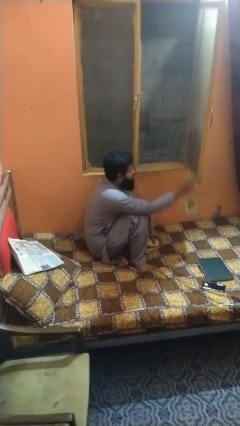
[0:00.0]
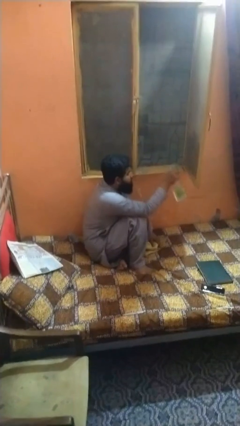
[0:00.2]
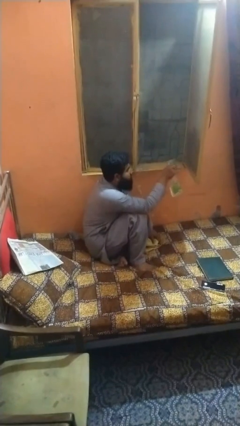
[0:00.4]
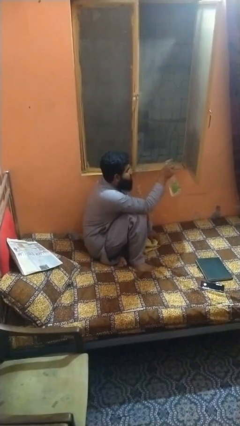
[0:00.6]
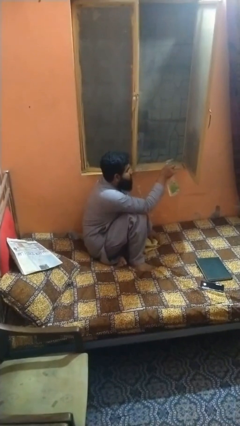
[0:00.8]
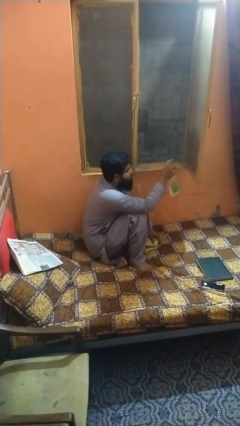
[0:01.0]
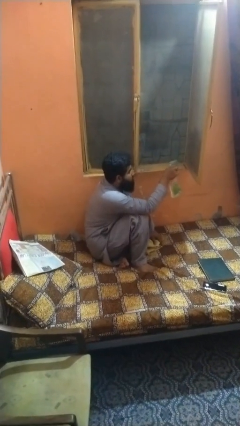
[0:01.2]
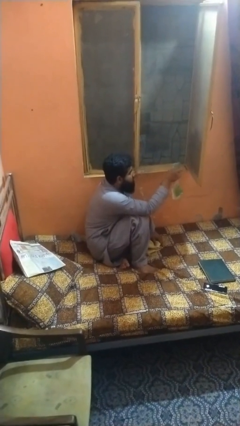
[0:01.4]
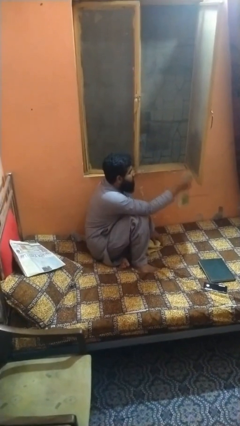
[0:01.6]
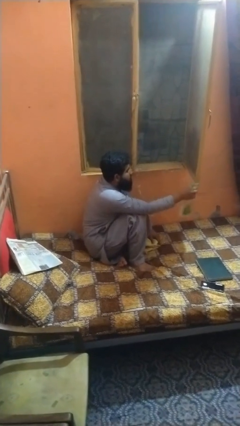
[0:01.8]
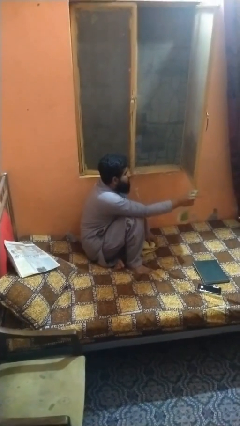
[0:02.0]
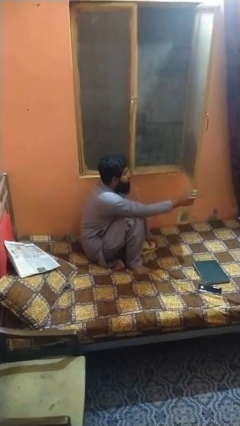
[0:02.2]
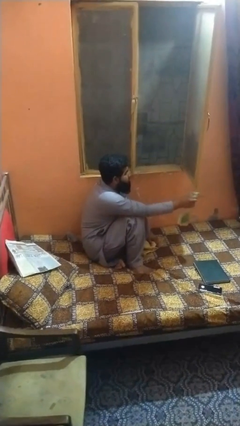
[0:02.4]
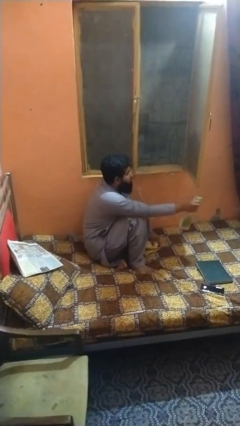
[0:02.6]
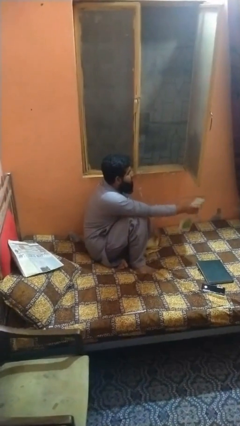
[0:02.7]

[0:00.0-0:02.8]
person sprays from bottle

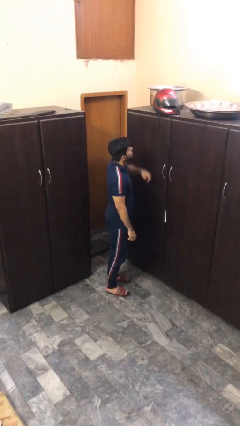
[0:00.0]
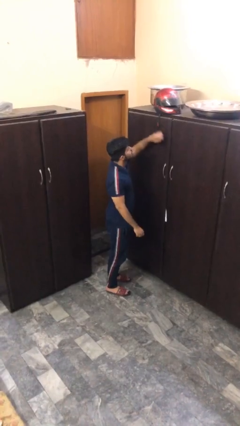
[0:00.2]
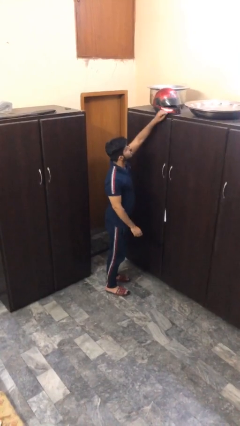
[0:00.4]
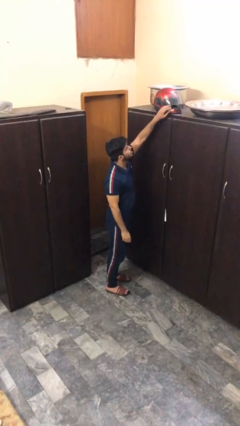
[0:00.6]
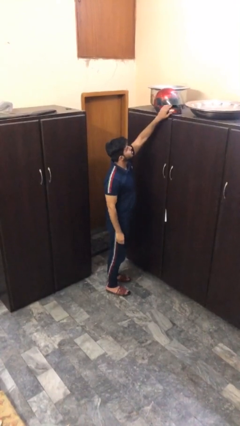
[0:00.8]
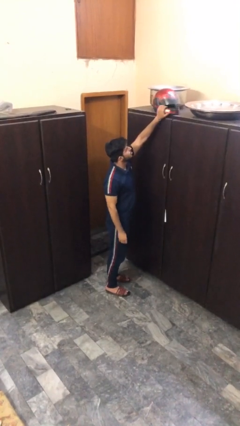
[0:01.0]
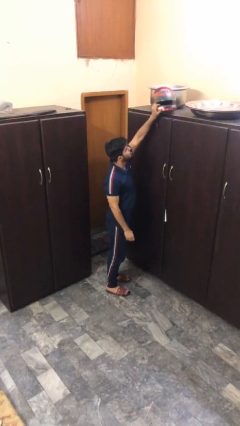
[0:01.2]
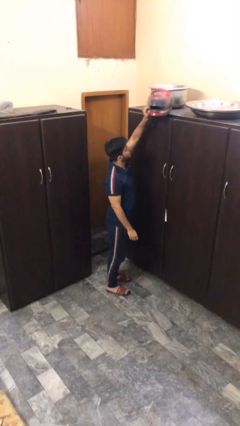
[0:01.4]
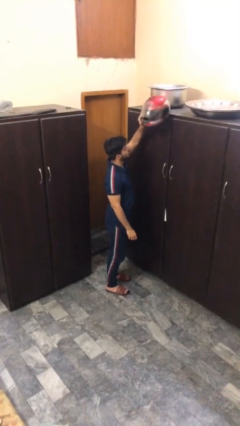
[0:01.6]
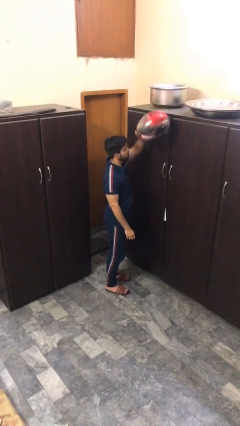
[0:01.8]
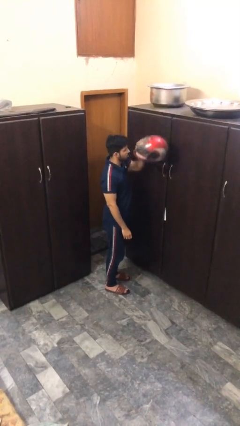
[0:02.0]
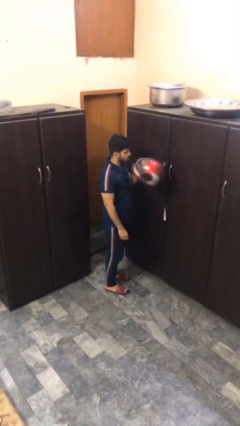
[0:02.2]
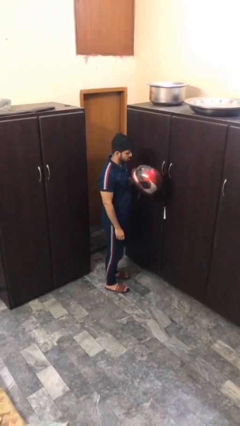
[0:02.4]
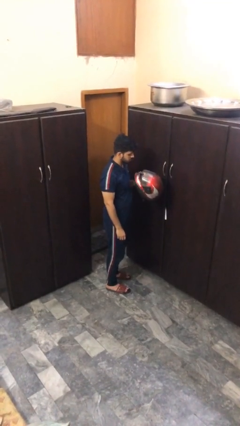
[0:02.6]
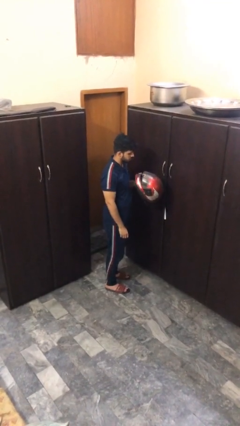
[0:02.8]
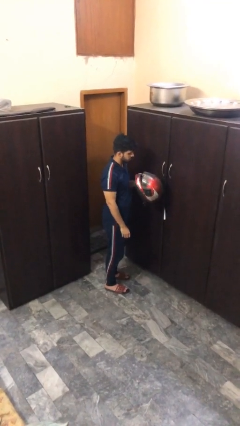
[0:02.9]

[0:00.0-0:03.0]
person picks up object from shelf

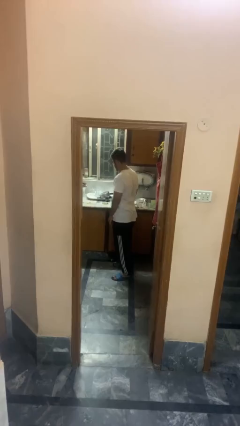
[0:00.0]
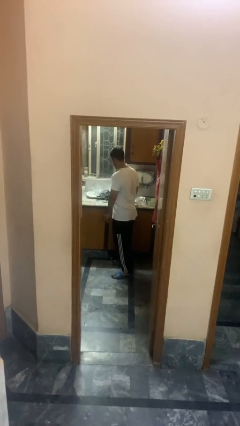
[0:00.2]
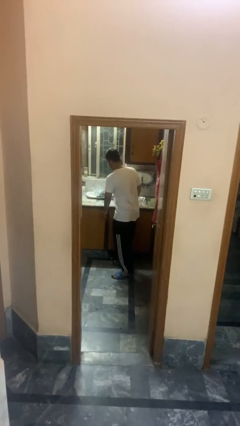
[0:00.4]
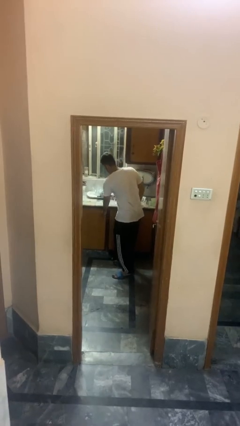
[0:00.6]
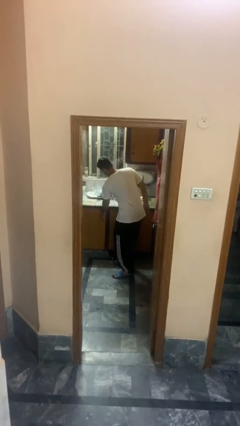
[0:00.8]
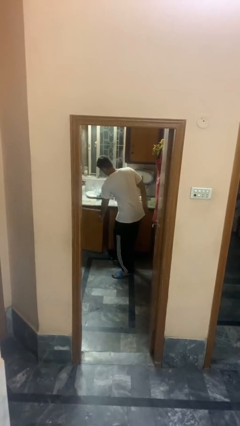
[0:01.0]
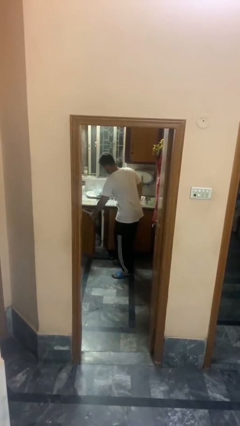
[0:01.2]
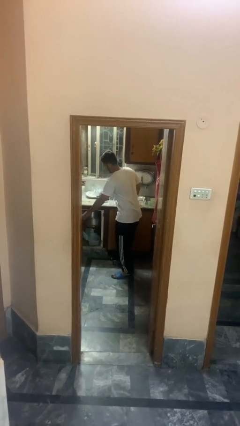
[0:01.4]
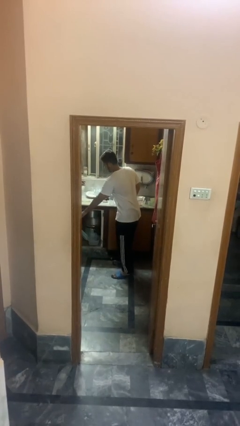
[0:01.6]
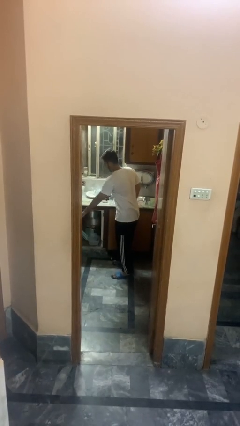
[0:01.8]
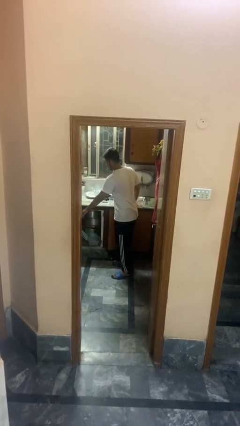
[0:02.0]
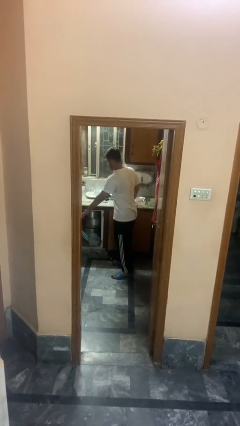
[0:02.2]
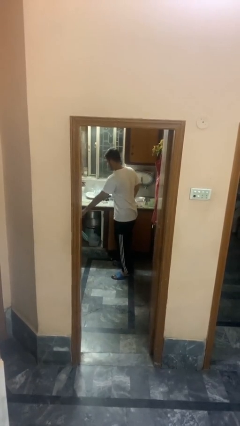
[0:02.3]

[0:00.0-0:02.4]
person opens cabinet

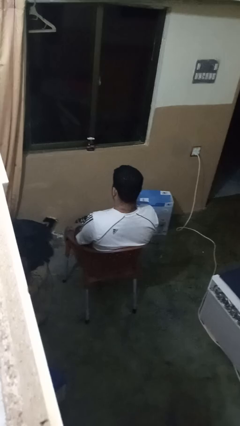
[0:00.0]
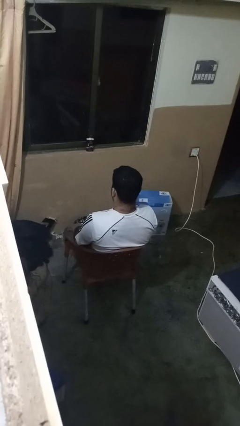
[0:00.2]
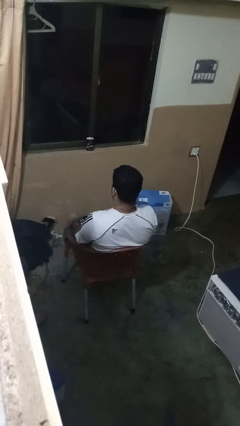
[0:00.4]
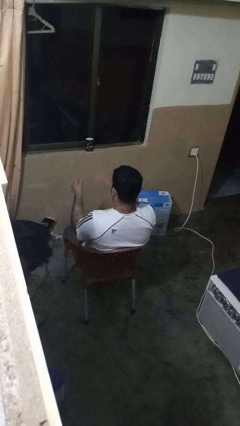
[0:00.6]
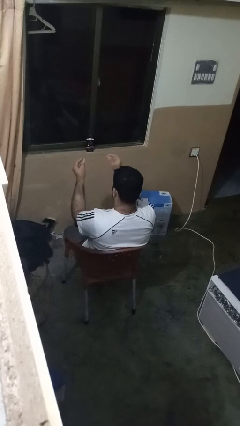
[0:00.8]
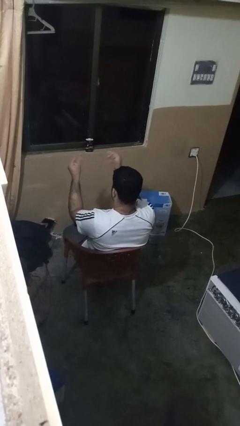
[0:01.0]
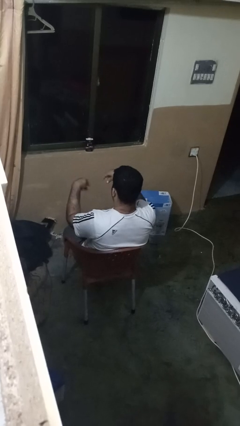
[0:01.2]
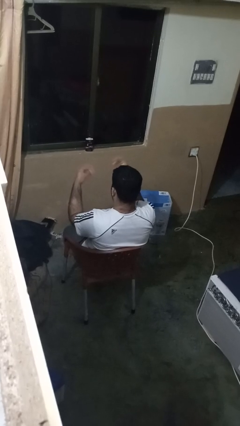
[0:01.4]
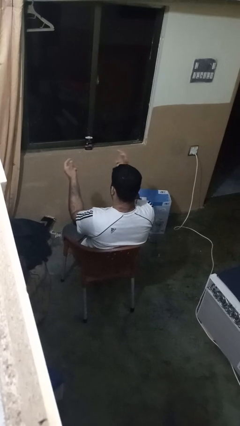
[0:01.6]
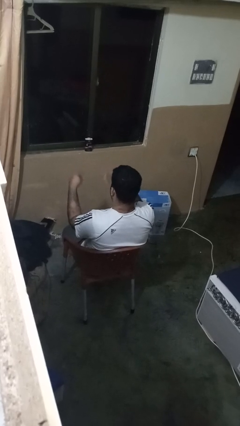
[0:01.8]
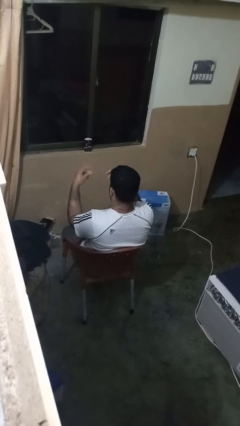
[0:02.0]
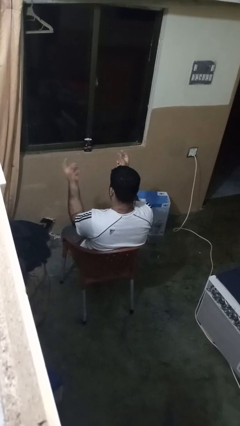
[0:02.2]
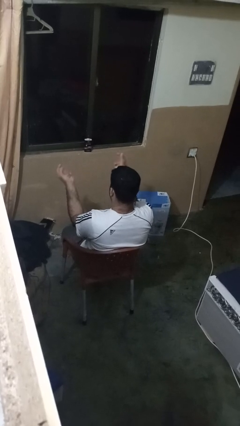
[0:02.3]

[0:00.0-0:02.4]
person snaps fingers

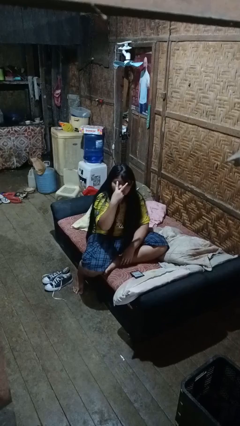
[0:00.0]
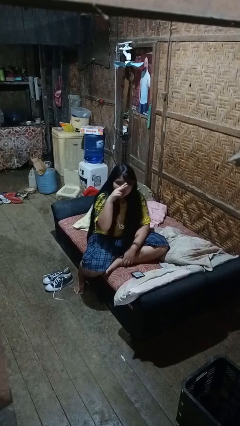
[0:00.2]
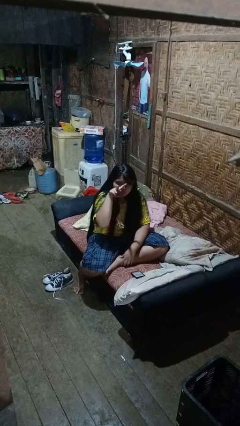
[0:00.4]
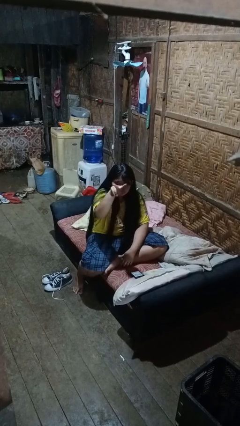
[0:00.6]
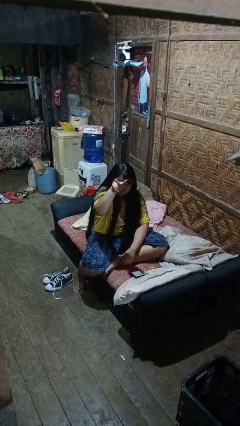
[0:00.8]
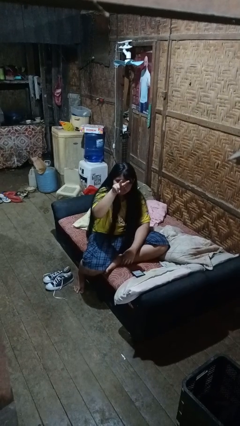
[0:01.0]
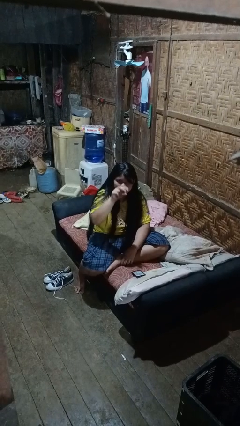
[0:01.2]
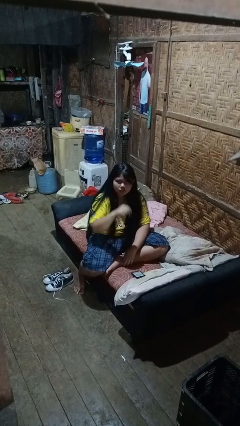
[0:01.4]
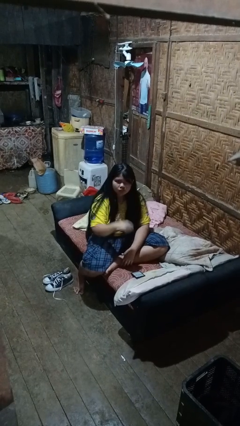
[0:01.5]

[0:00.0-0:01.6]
person gestures watch closely

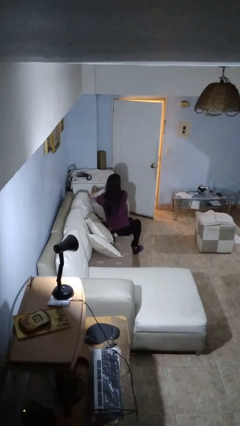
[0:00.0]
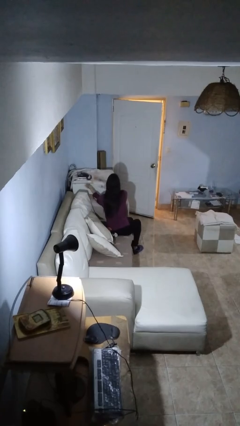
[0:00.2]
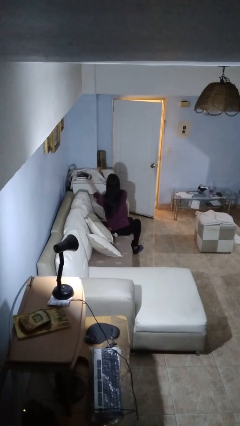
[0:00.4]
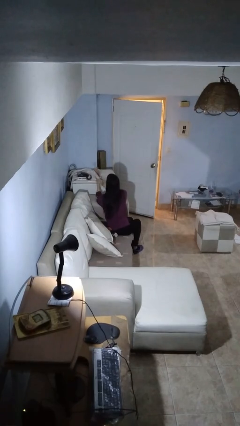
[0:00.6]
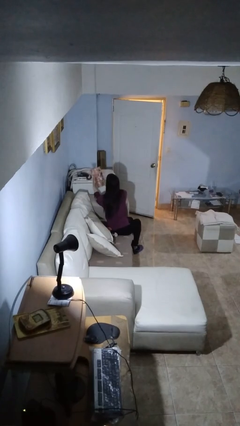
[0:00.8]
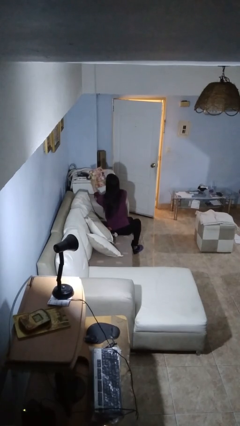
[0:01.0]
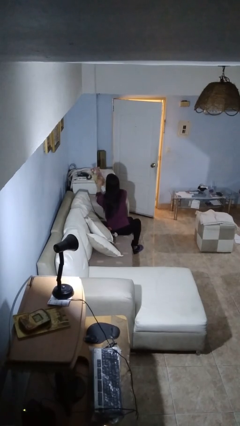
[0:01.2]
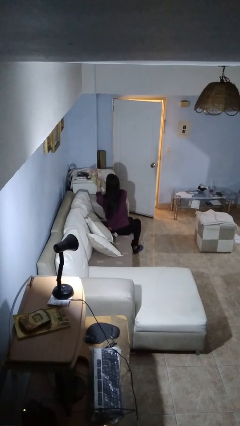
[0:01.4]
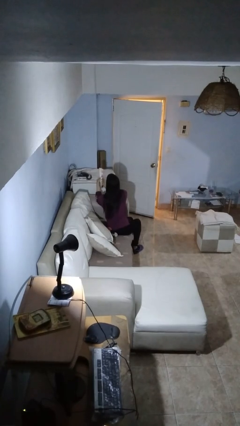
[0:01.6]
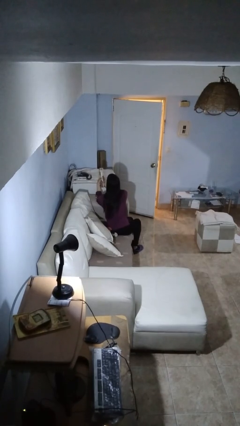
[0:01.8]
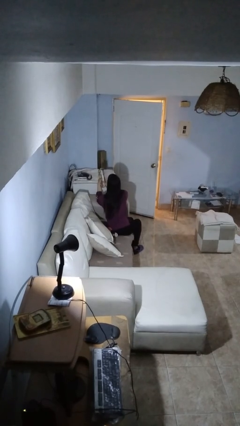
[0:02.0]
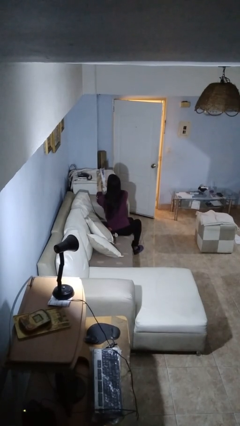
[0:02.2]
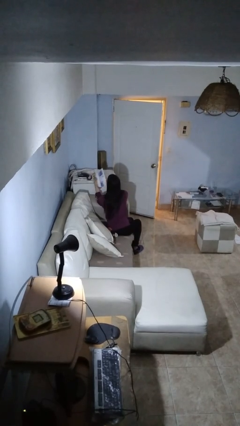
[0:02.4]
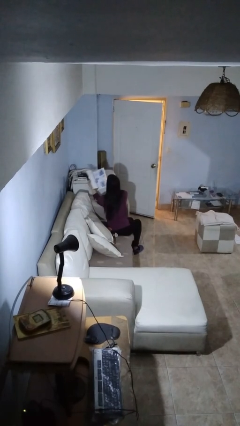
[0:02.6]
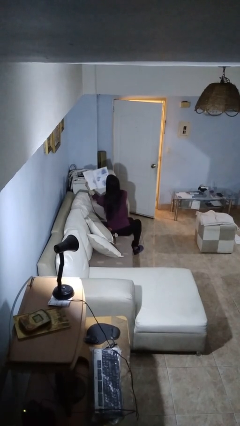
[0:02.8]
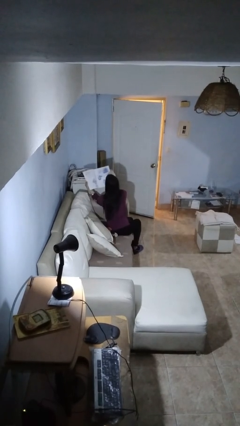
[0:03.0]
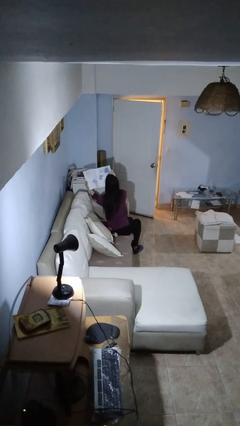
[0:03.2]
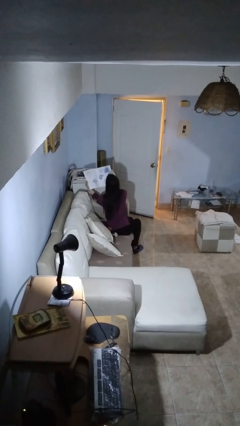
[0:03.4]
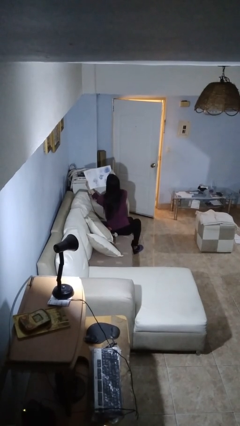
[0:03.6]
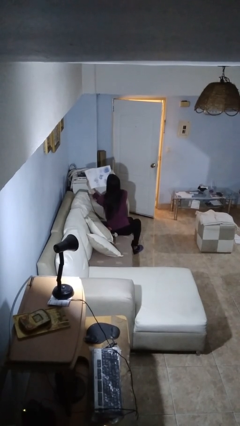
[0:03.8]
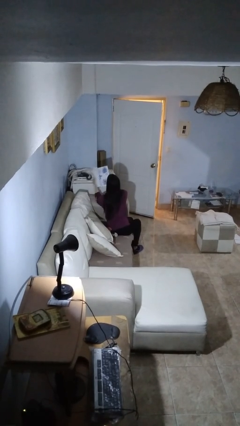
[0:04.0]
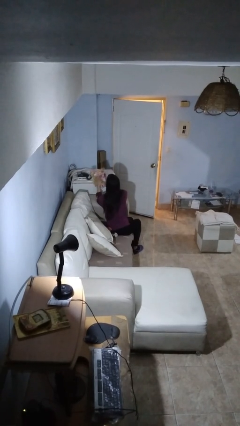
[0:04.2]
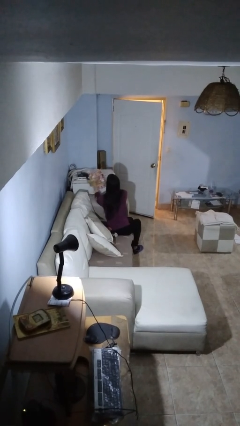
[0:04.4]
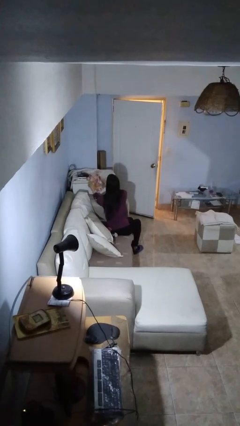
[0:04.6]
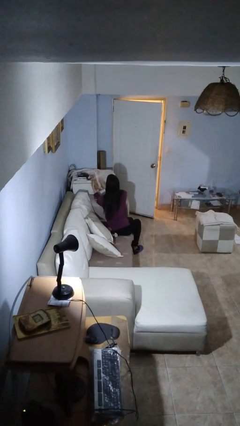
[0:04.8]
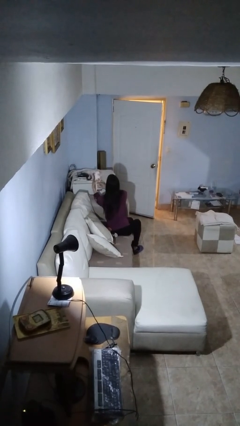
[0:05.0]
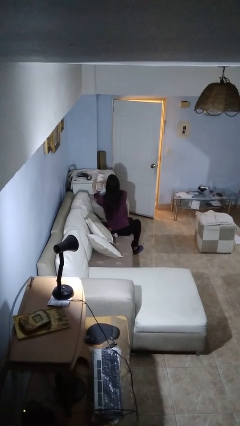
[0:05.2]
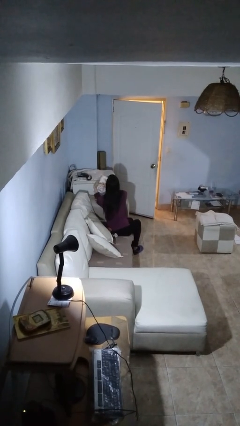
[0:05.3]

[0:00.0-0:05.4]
person reads magazine
